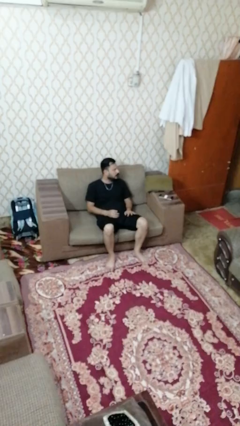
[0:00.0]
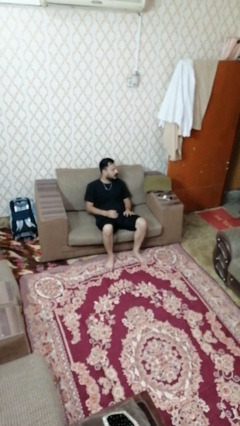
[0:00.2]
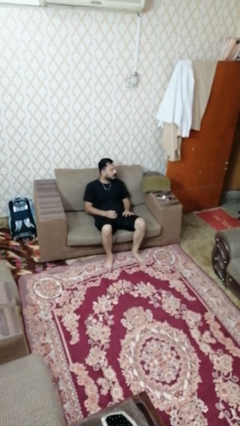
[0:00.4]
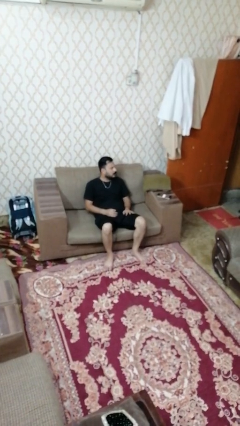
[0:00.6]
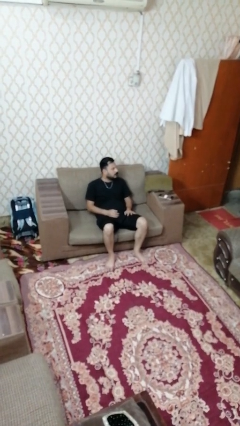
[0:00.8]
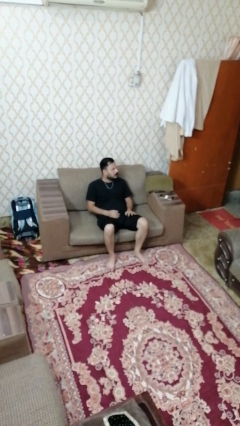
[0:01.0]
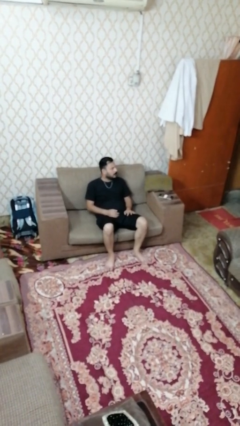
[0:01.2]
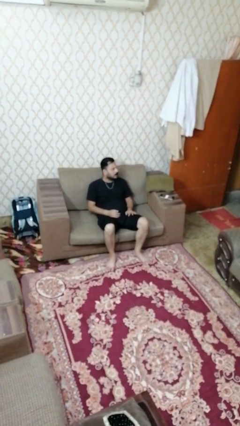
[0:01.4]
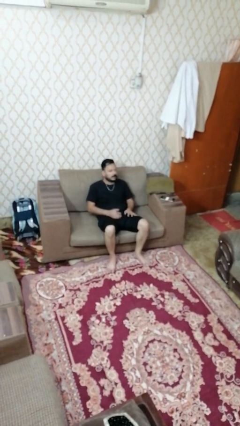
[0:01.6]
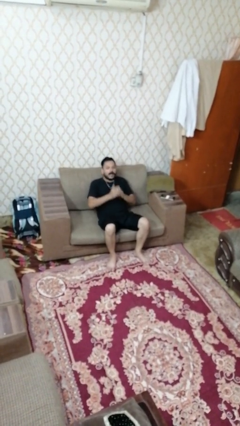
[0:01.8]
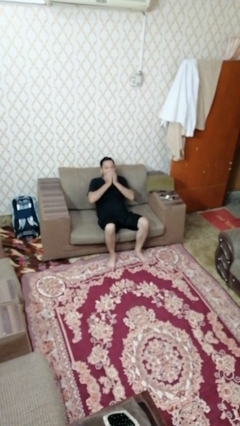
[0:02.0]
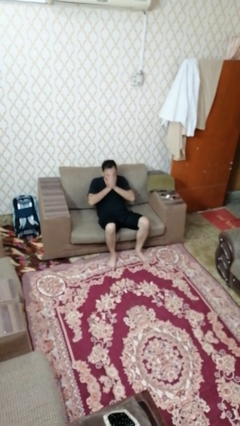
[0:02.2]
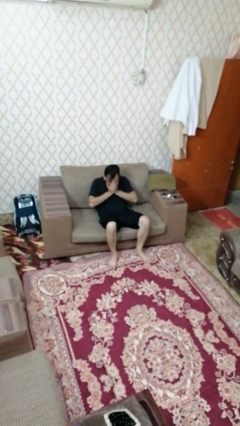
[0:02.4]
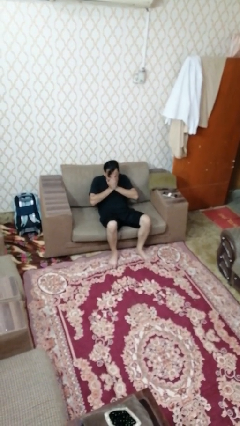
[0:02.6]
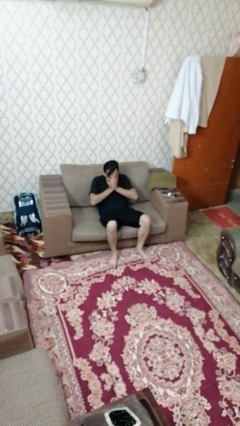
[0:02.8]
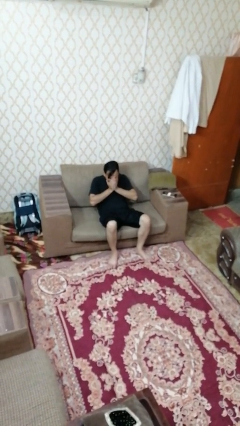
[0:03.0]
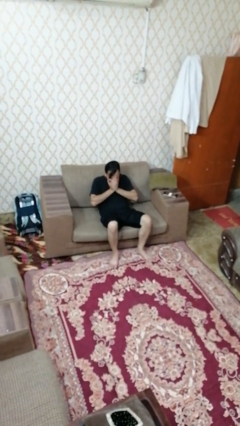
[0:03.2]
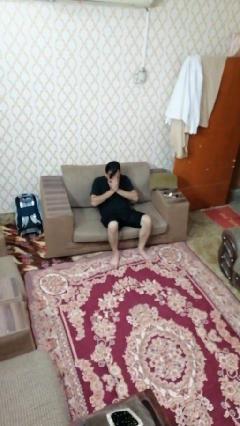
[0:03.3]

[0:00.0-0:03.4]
person sneezes into hand

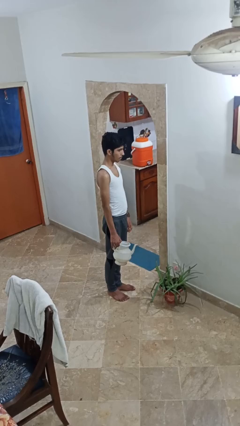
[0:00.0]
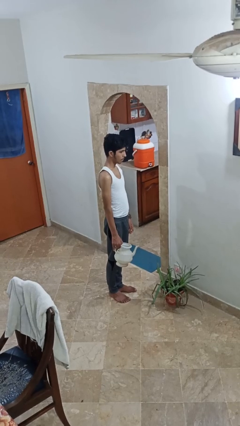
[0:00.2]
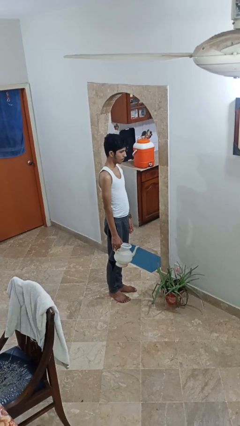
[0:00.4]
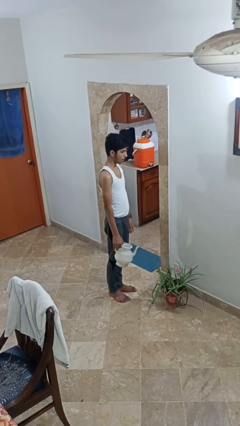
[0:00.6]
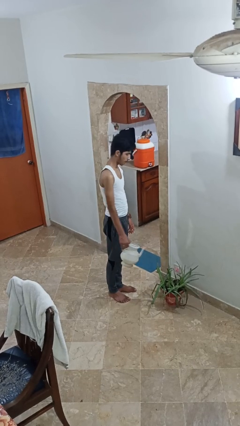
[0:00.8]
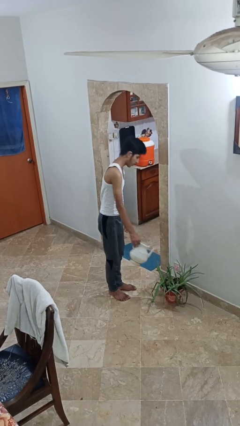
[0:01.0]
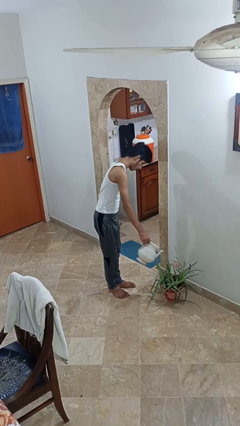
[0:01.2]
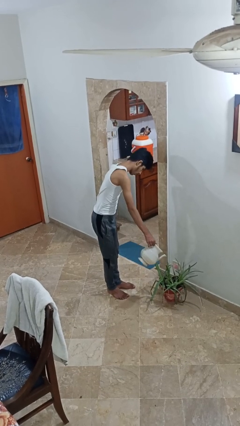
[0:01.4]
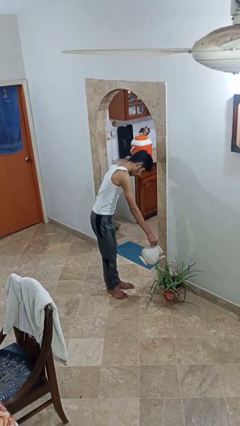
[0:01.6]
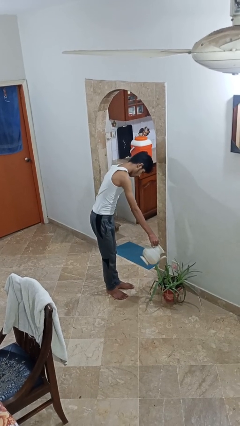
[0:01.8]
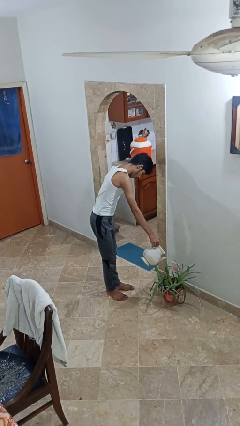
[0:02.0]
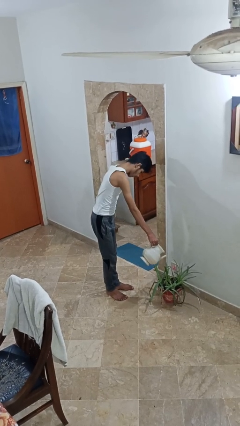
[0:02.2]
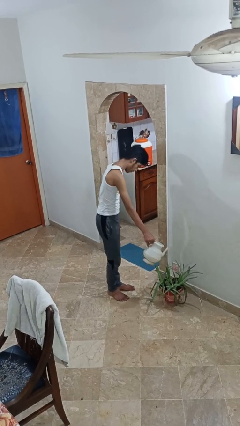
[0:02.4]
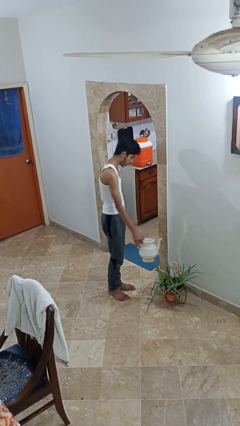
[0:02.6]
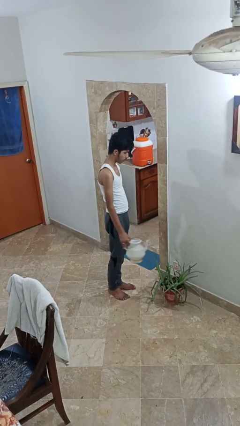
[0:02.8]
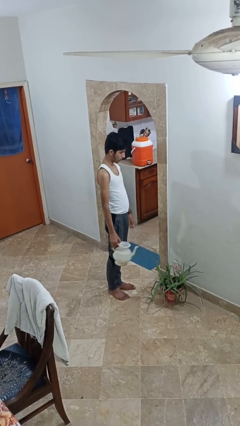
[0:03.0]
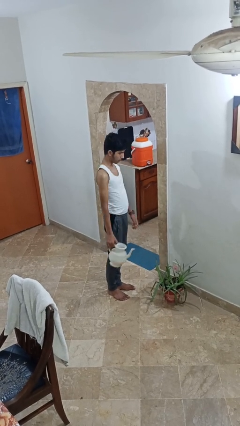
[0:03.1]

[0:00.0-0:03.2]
person waters houseplant

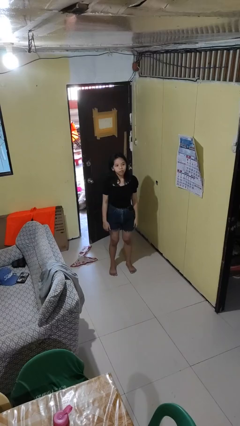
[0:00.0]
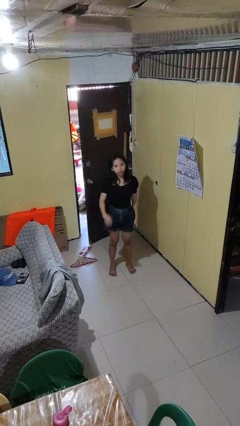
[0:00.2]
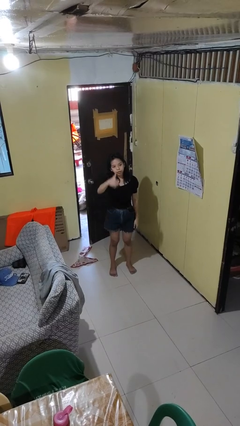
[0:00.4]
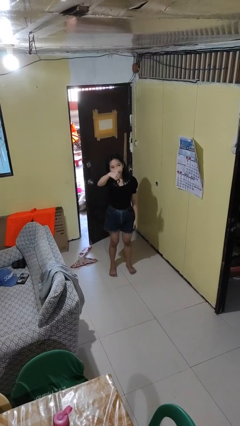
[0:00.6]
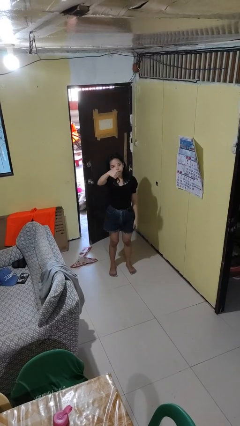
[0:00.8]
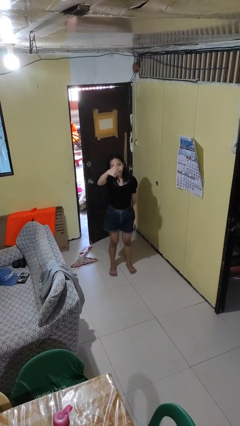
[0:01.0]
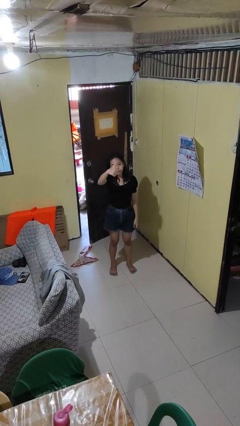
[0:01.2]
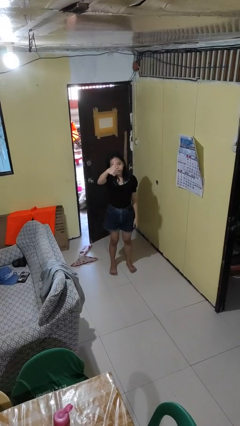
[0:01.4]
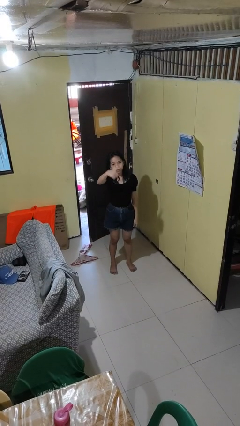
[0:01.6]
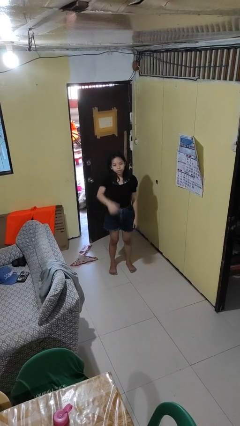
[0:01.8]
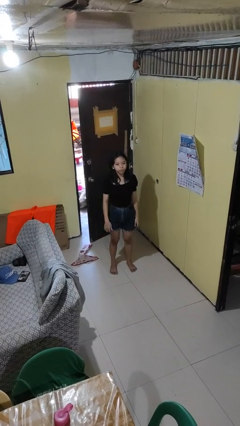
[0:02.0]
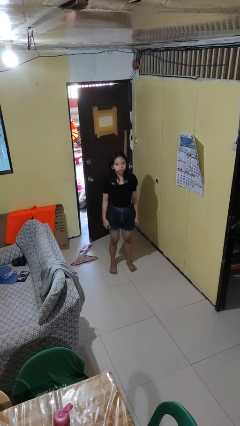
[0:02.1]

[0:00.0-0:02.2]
person gestures thumbs up

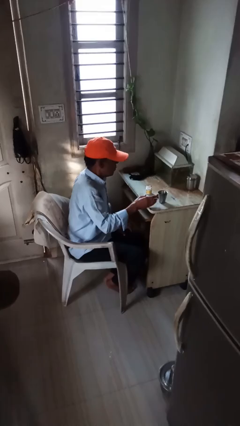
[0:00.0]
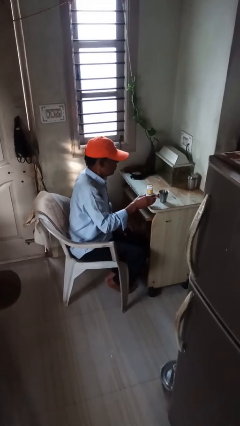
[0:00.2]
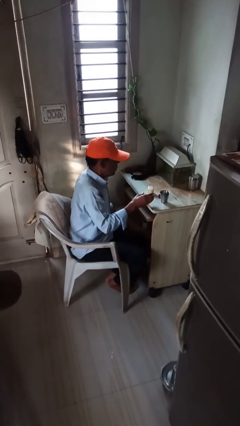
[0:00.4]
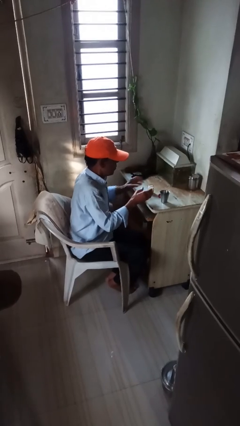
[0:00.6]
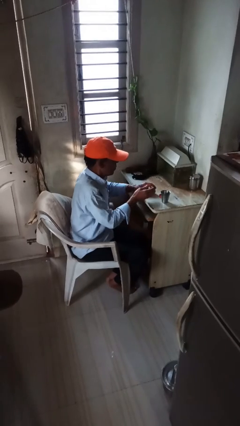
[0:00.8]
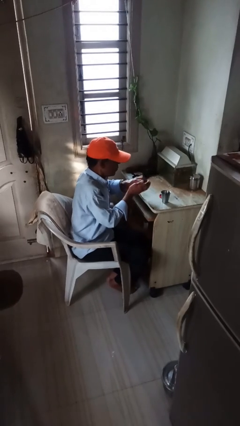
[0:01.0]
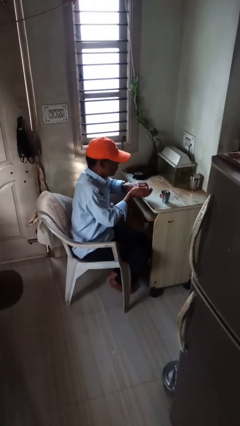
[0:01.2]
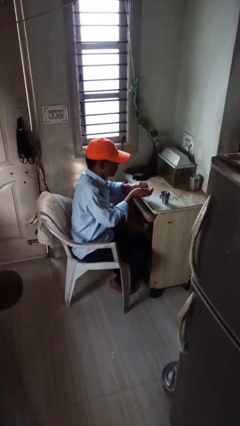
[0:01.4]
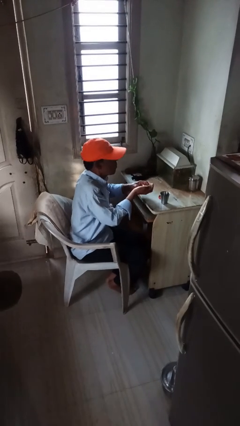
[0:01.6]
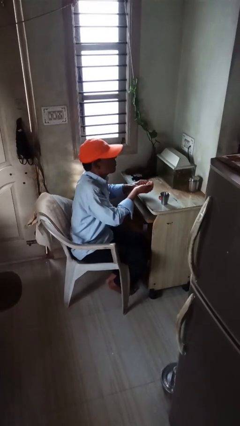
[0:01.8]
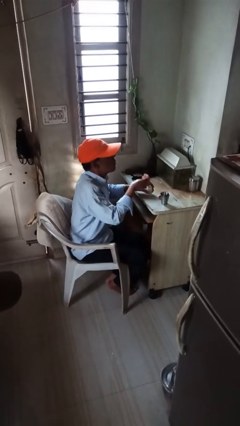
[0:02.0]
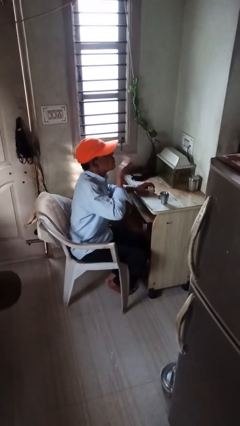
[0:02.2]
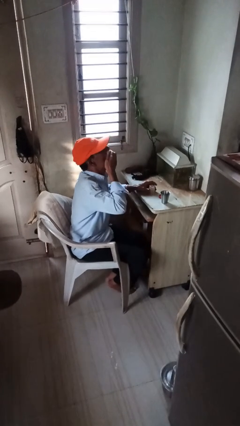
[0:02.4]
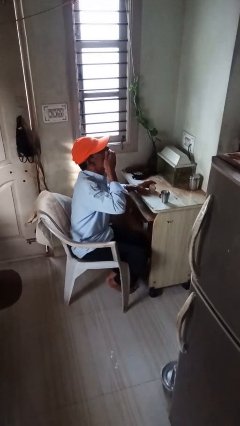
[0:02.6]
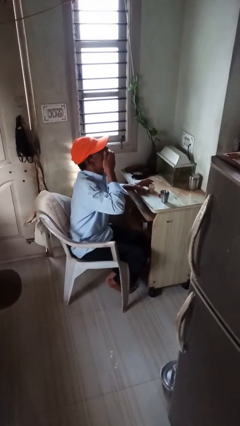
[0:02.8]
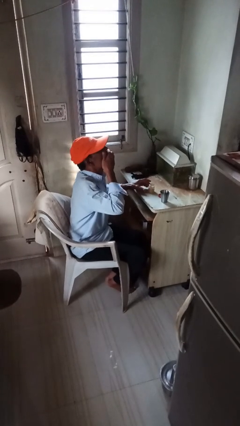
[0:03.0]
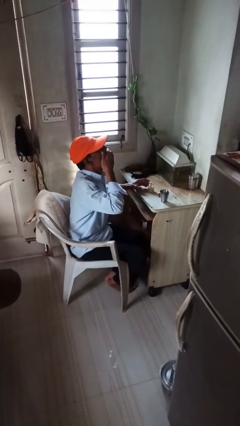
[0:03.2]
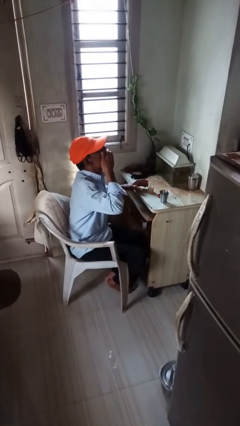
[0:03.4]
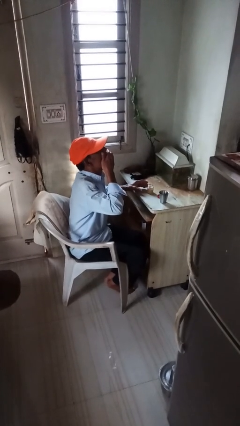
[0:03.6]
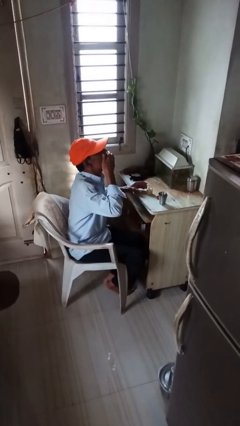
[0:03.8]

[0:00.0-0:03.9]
person takes medicine pills

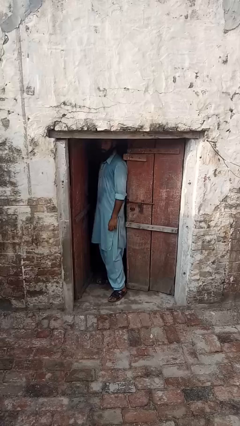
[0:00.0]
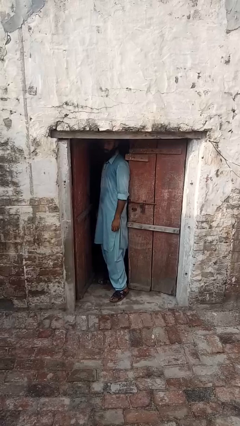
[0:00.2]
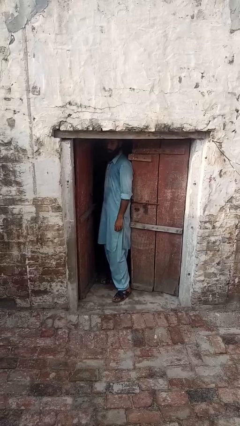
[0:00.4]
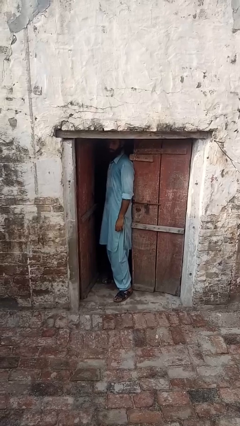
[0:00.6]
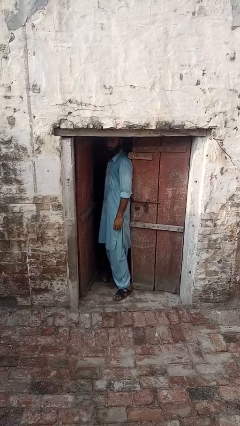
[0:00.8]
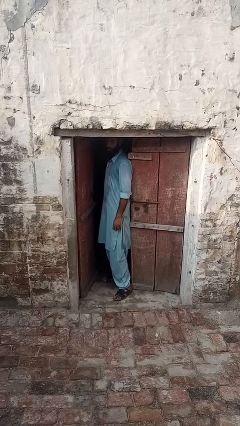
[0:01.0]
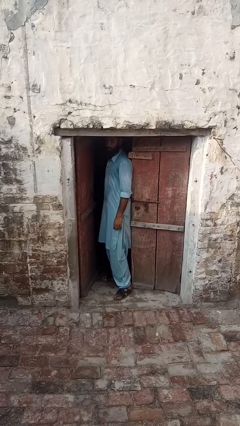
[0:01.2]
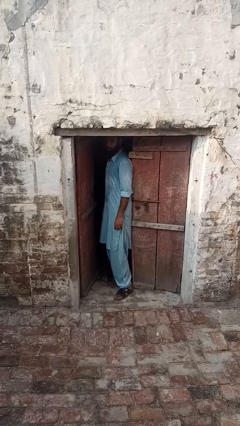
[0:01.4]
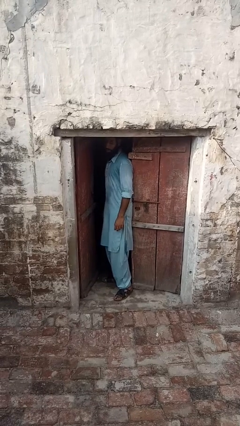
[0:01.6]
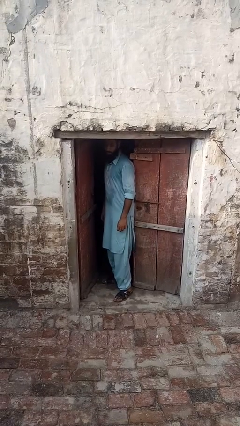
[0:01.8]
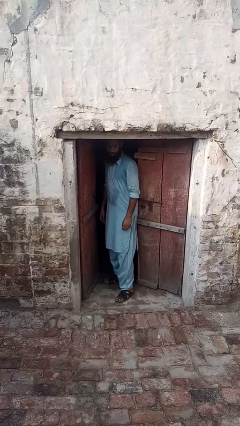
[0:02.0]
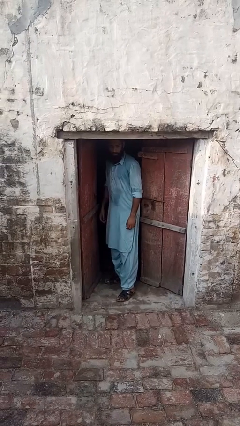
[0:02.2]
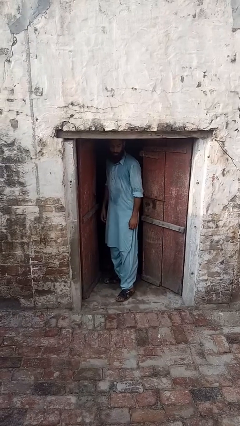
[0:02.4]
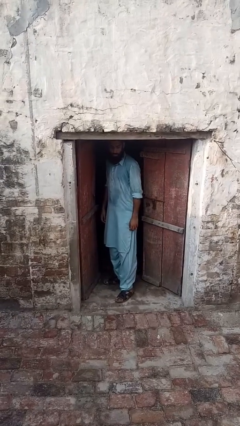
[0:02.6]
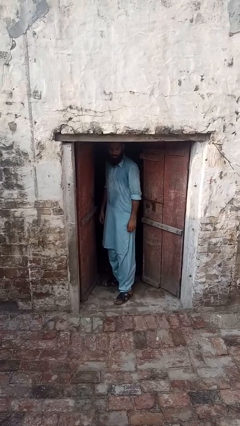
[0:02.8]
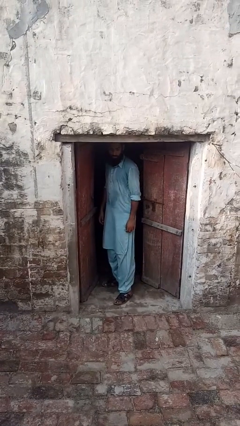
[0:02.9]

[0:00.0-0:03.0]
person opens facility door

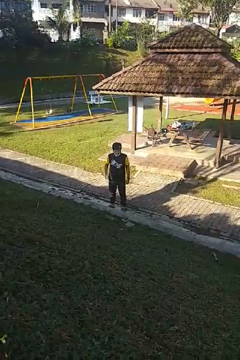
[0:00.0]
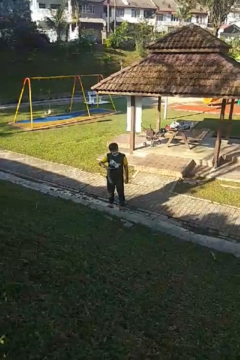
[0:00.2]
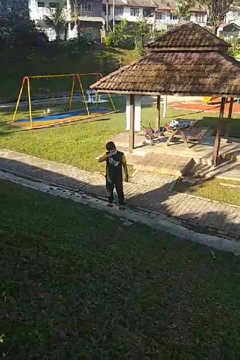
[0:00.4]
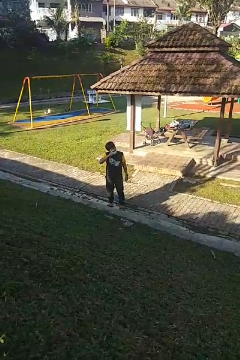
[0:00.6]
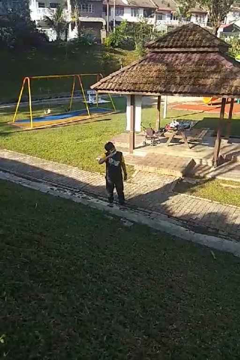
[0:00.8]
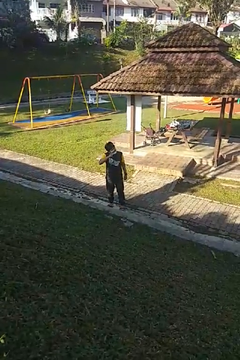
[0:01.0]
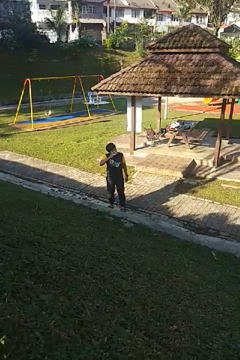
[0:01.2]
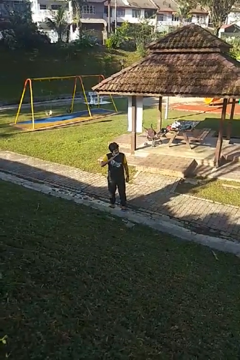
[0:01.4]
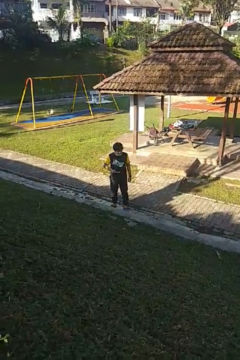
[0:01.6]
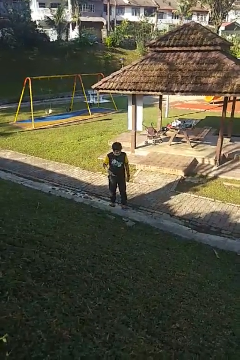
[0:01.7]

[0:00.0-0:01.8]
person brushes teeth
